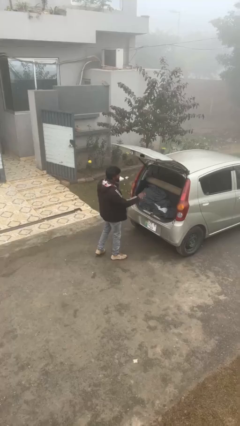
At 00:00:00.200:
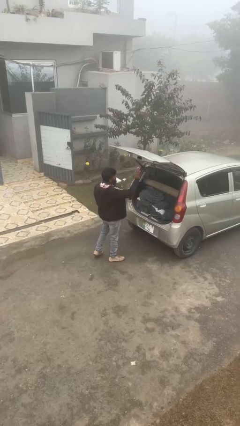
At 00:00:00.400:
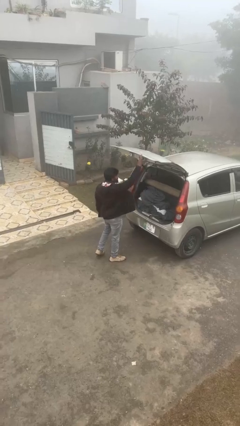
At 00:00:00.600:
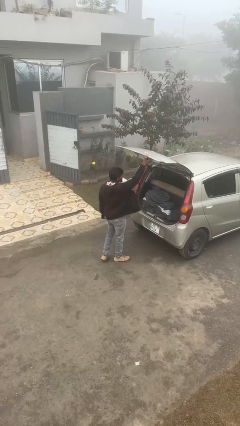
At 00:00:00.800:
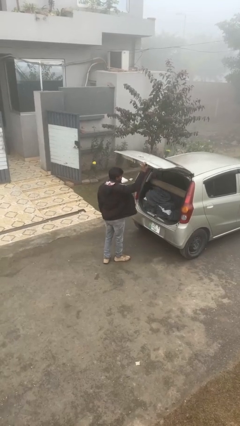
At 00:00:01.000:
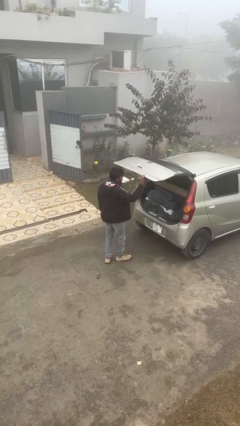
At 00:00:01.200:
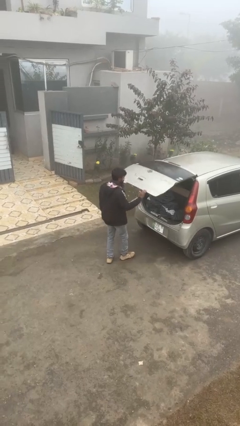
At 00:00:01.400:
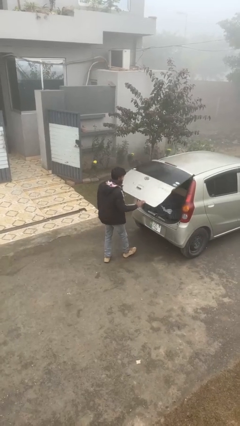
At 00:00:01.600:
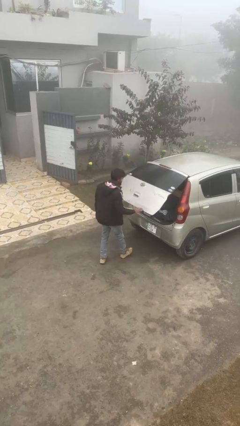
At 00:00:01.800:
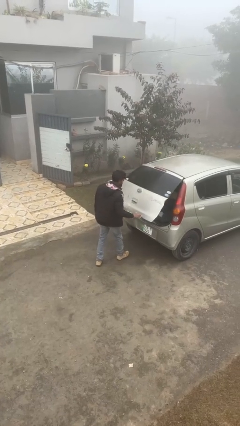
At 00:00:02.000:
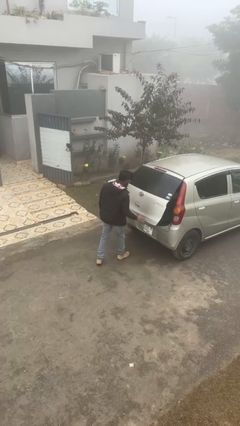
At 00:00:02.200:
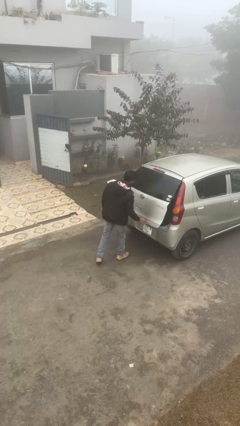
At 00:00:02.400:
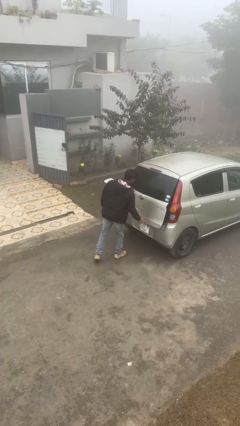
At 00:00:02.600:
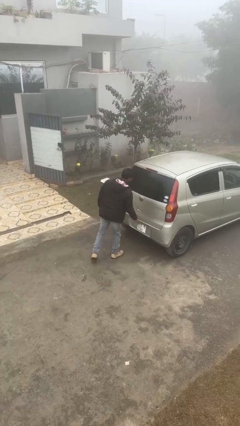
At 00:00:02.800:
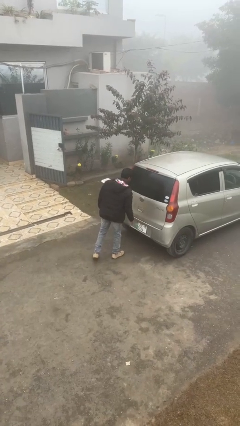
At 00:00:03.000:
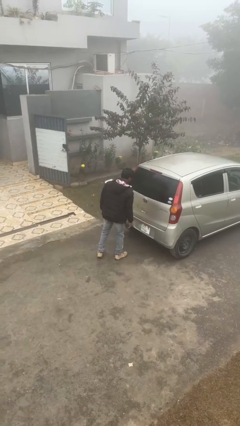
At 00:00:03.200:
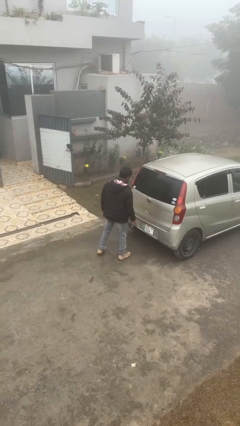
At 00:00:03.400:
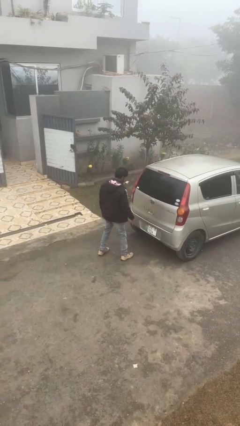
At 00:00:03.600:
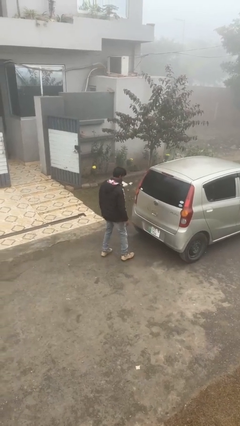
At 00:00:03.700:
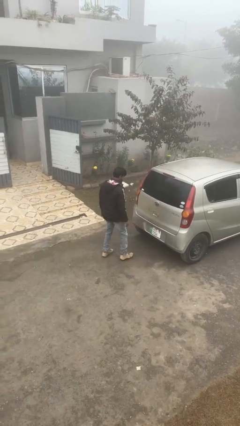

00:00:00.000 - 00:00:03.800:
person closes car trunk

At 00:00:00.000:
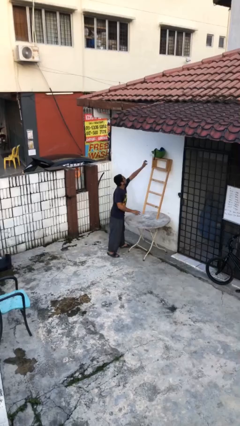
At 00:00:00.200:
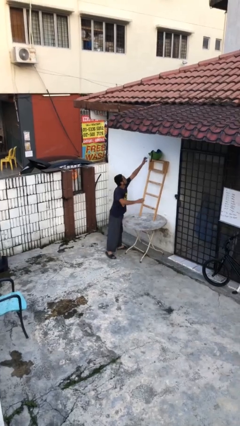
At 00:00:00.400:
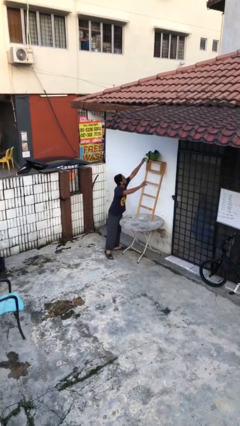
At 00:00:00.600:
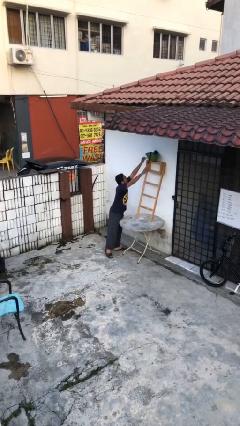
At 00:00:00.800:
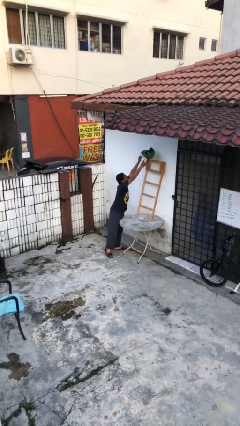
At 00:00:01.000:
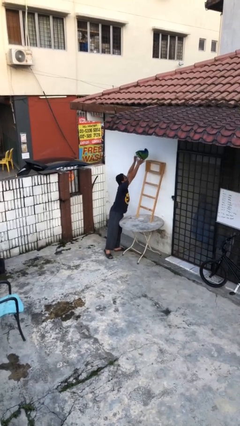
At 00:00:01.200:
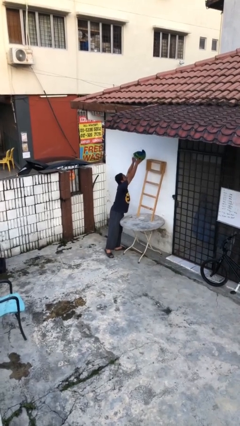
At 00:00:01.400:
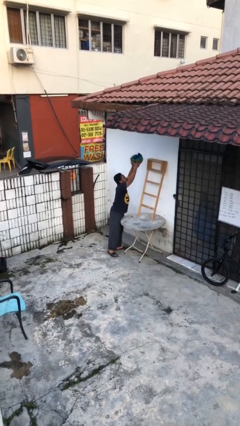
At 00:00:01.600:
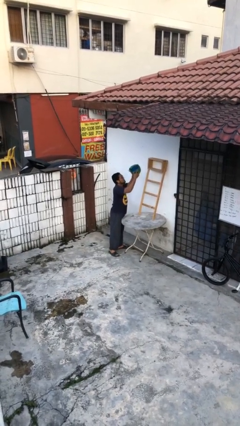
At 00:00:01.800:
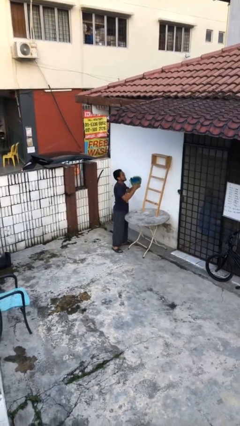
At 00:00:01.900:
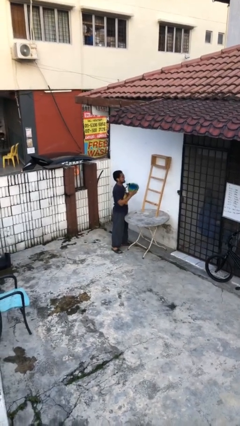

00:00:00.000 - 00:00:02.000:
person picks up object from shelf

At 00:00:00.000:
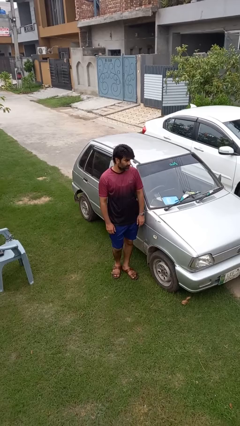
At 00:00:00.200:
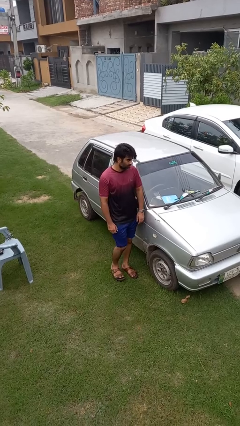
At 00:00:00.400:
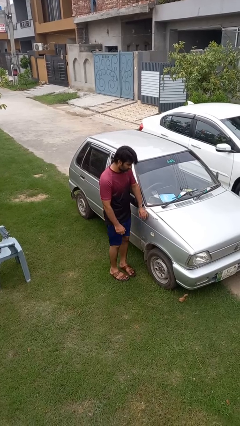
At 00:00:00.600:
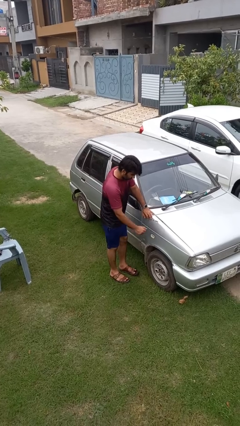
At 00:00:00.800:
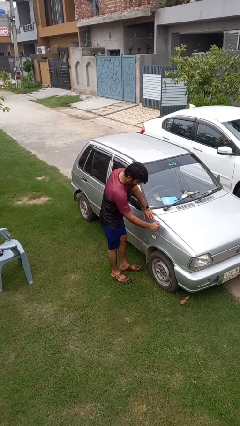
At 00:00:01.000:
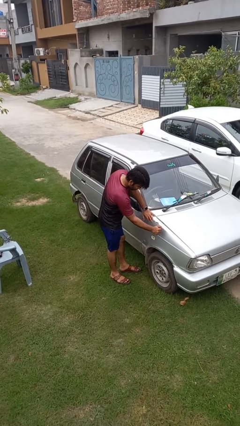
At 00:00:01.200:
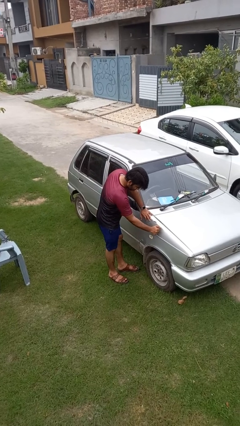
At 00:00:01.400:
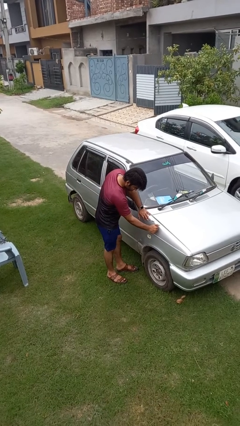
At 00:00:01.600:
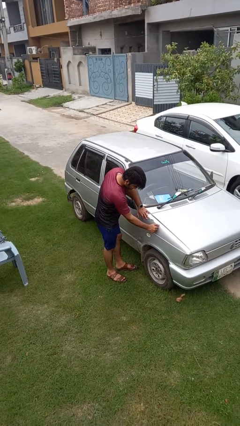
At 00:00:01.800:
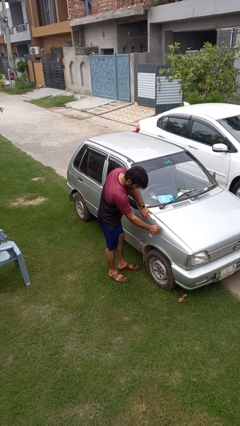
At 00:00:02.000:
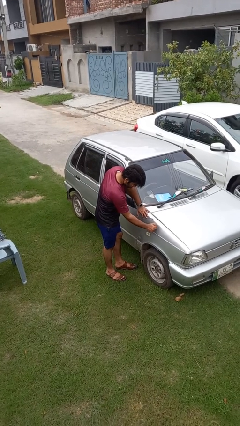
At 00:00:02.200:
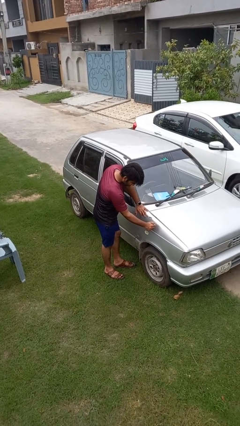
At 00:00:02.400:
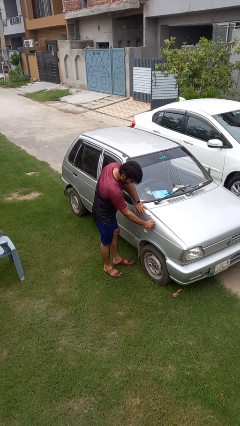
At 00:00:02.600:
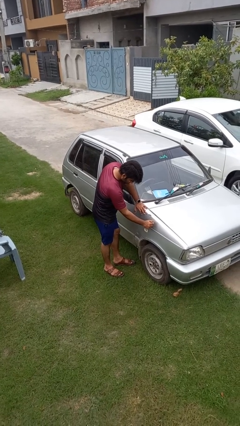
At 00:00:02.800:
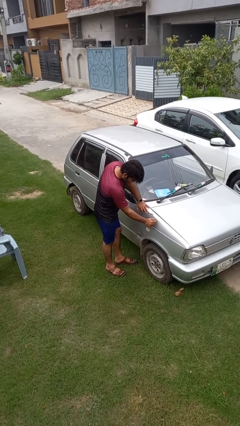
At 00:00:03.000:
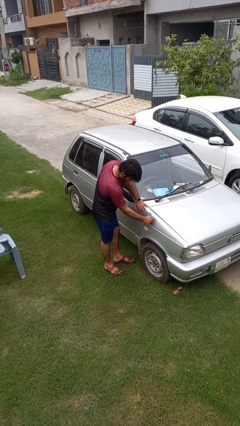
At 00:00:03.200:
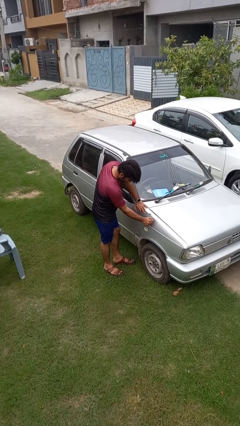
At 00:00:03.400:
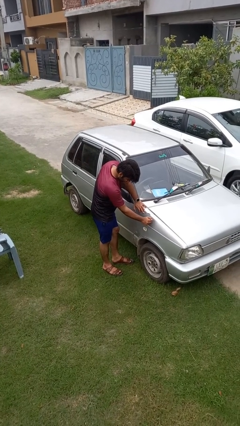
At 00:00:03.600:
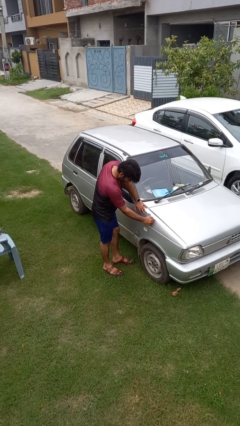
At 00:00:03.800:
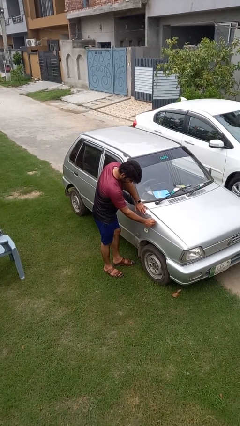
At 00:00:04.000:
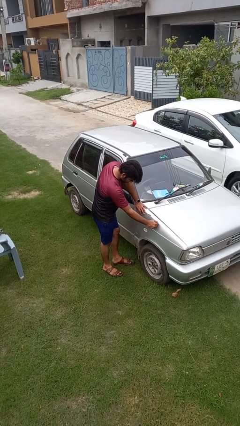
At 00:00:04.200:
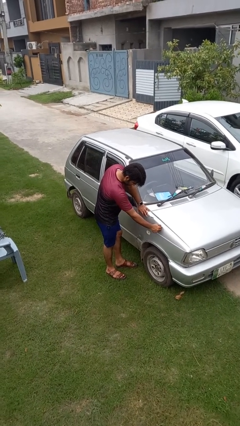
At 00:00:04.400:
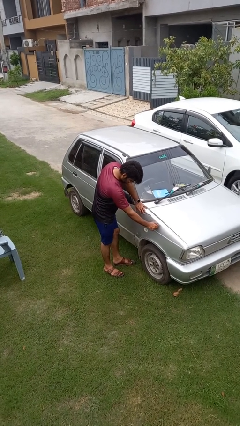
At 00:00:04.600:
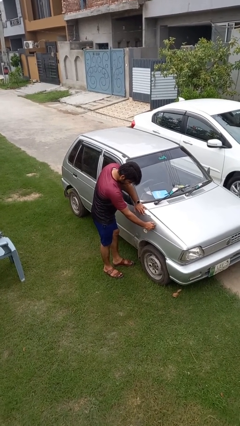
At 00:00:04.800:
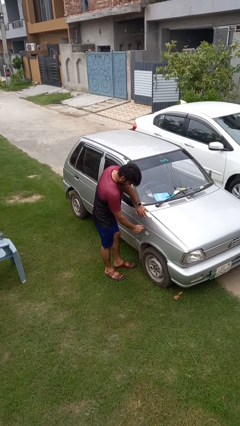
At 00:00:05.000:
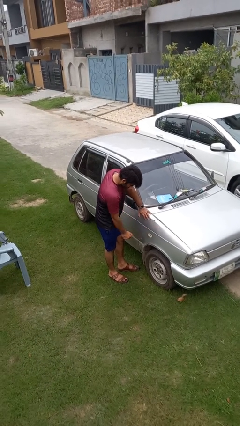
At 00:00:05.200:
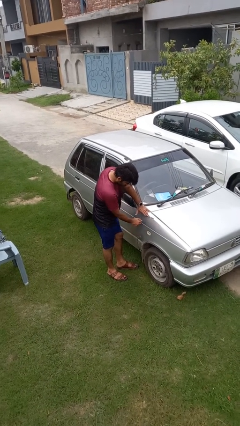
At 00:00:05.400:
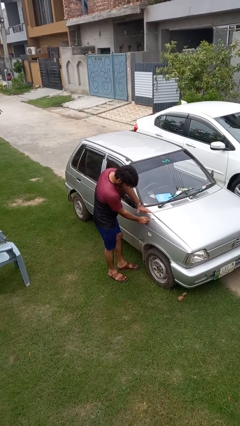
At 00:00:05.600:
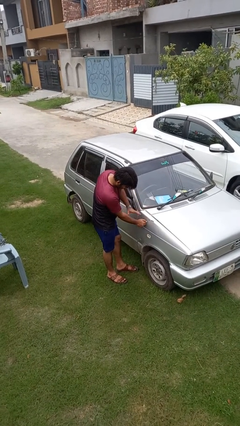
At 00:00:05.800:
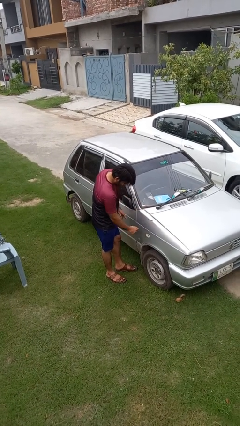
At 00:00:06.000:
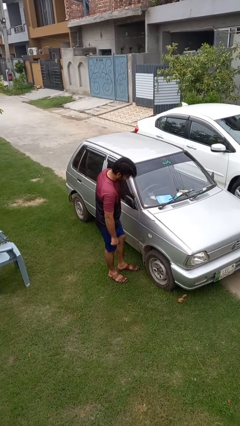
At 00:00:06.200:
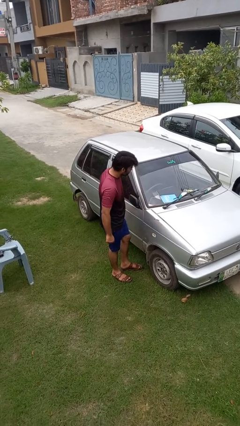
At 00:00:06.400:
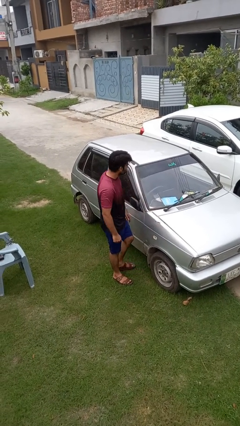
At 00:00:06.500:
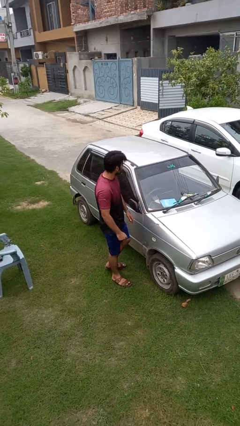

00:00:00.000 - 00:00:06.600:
person taps object with finger

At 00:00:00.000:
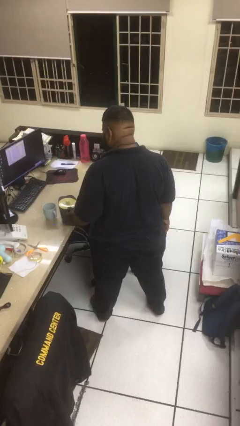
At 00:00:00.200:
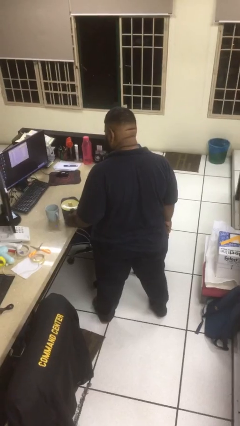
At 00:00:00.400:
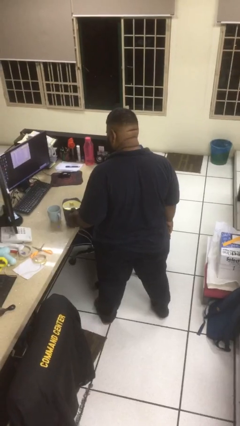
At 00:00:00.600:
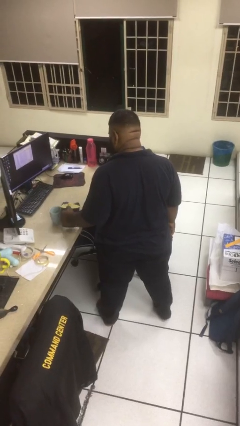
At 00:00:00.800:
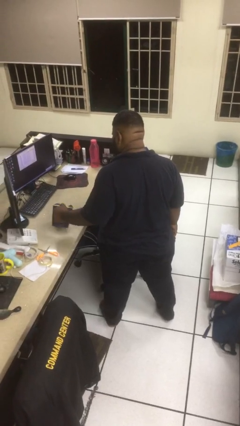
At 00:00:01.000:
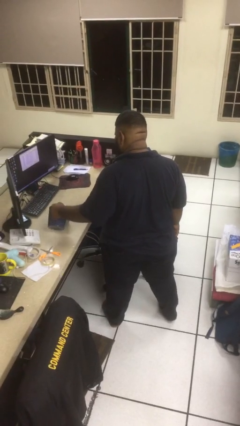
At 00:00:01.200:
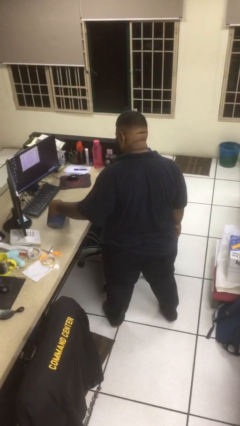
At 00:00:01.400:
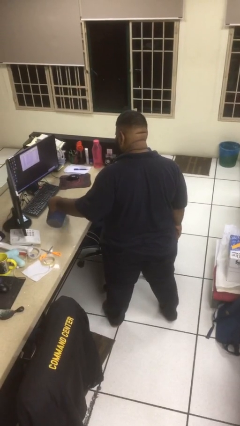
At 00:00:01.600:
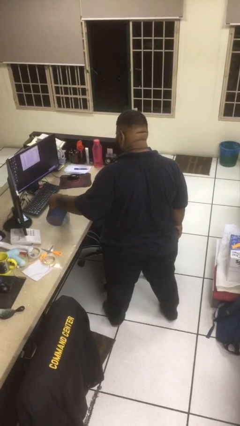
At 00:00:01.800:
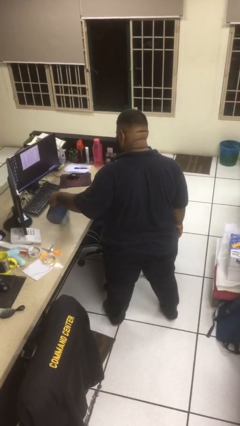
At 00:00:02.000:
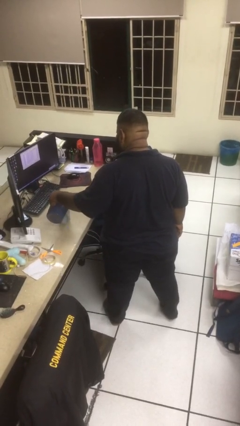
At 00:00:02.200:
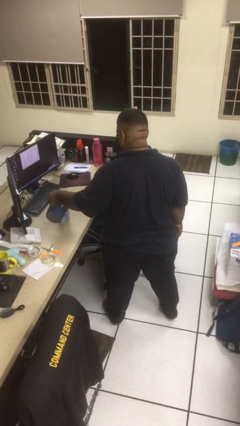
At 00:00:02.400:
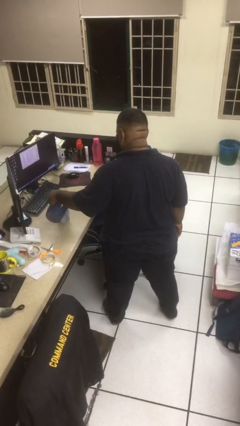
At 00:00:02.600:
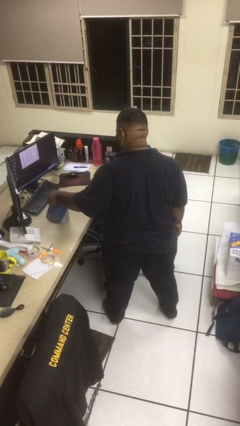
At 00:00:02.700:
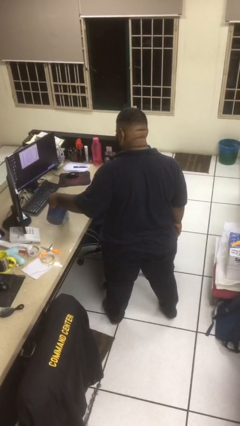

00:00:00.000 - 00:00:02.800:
person pours coffee into mug

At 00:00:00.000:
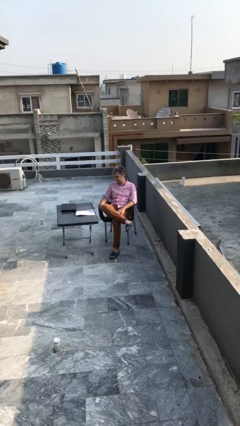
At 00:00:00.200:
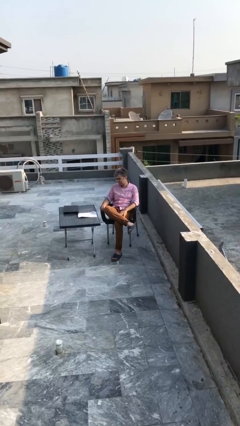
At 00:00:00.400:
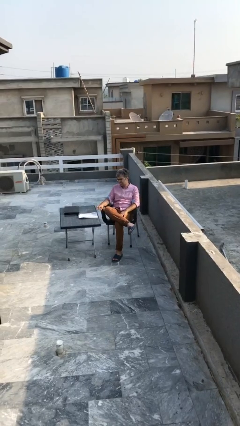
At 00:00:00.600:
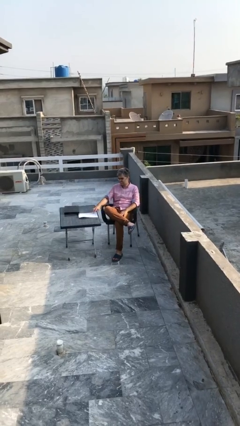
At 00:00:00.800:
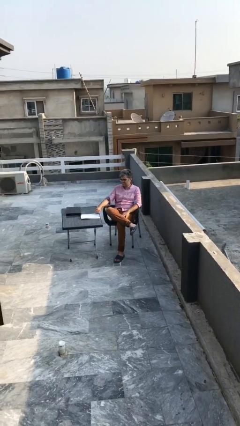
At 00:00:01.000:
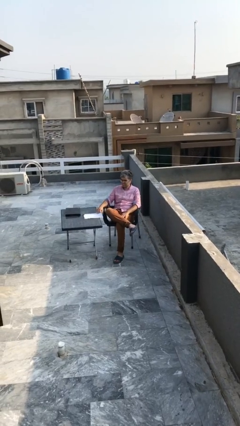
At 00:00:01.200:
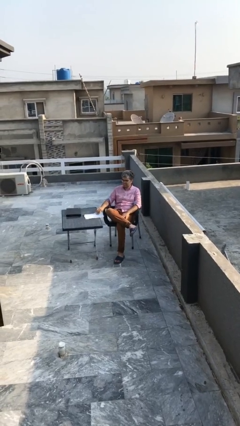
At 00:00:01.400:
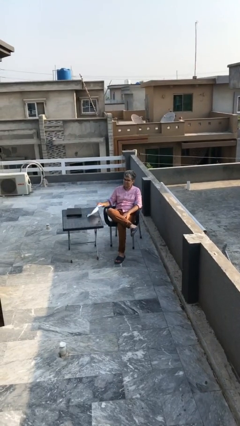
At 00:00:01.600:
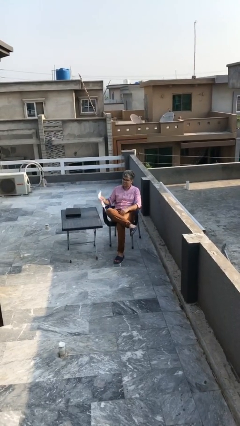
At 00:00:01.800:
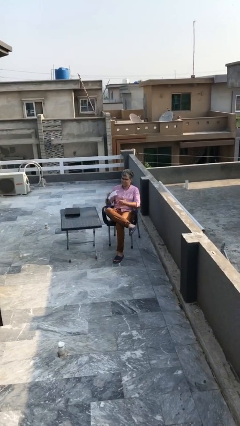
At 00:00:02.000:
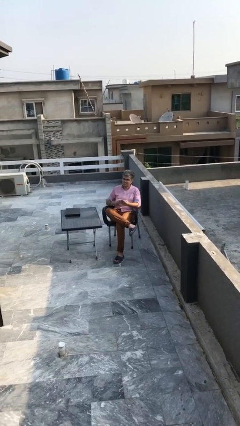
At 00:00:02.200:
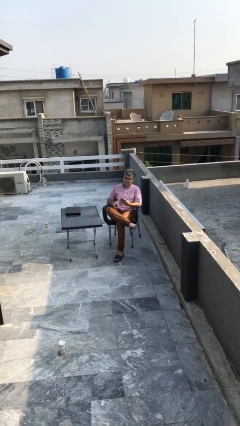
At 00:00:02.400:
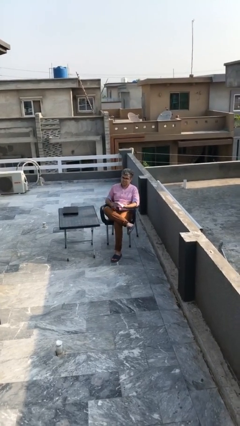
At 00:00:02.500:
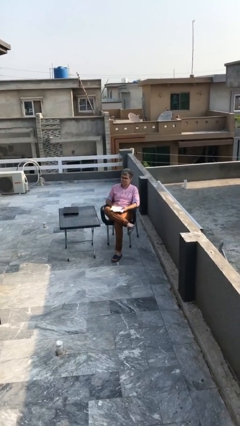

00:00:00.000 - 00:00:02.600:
person picks up object from table
